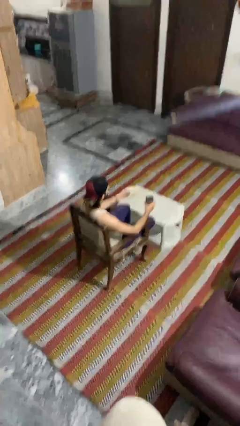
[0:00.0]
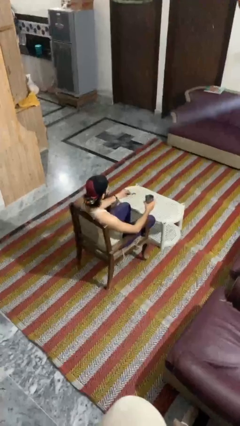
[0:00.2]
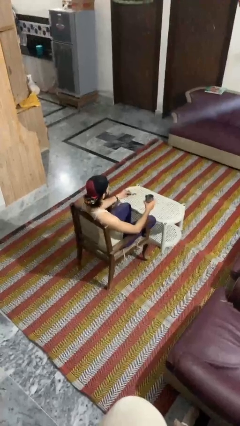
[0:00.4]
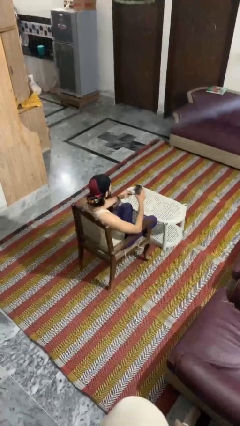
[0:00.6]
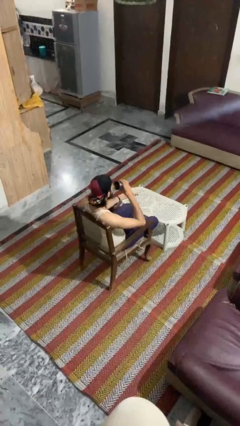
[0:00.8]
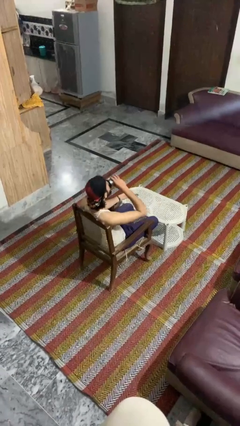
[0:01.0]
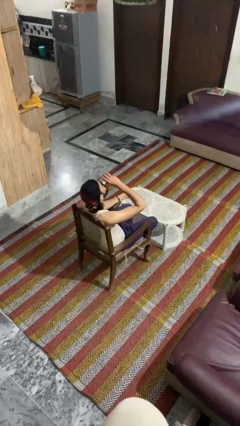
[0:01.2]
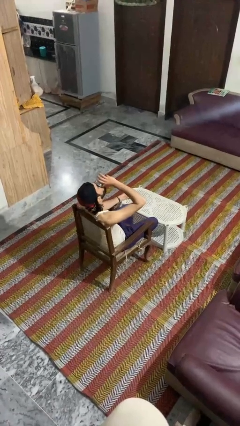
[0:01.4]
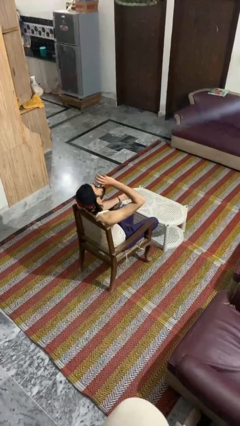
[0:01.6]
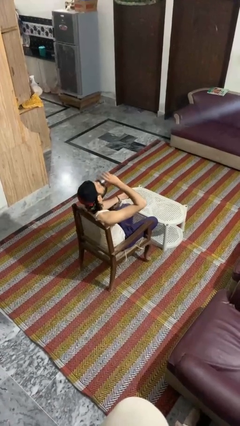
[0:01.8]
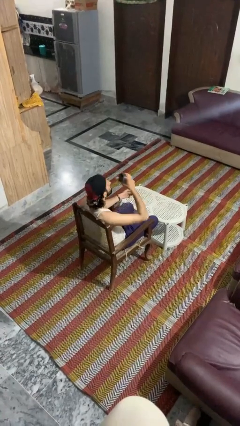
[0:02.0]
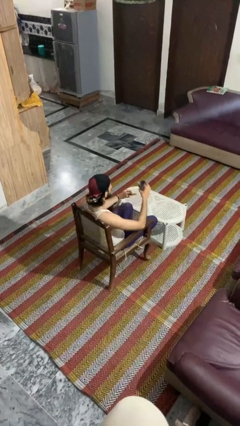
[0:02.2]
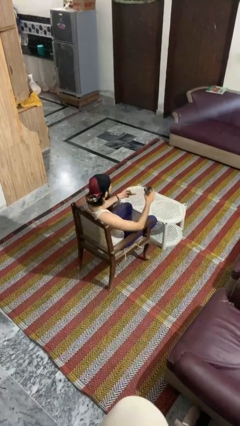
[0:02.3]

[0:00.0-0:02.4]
person drinks from mug

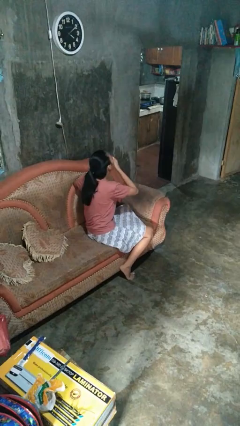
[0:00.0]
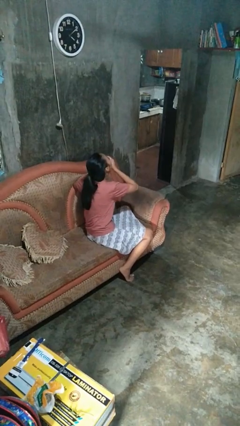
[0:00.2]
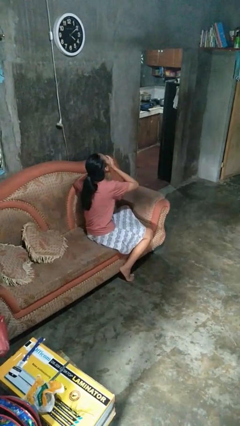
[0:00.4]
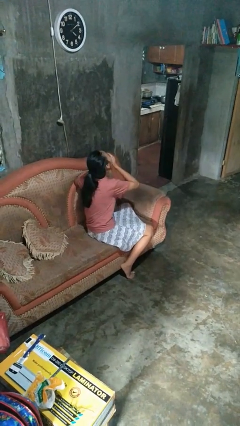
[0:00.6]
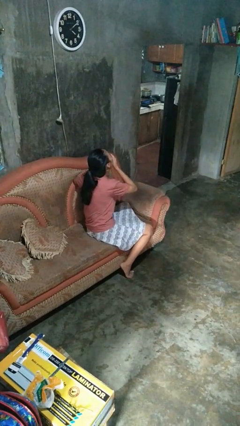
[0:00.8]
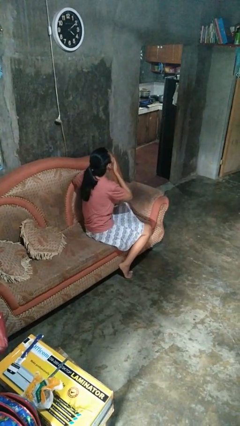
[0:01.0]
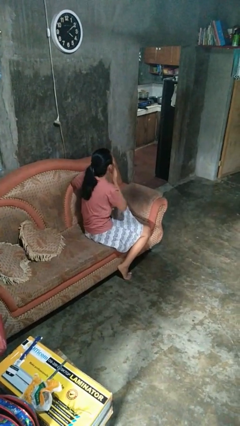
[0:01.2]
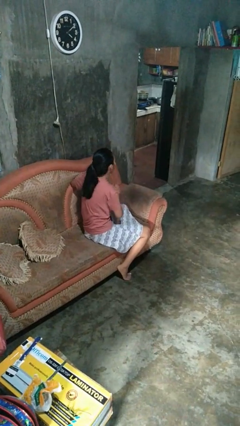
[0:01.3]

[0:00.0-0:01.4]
person yawns

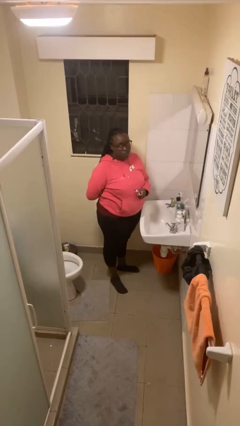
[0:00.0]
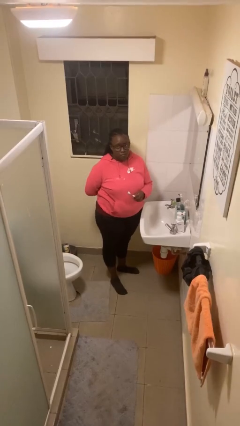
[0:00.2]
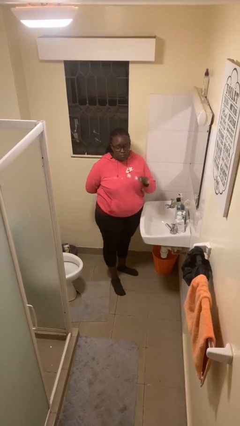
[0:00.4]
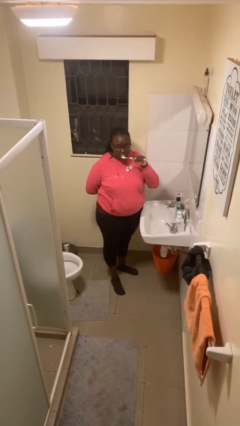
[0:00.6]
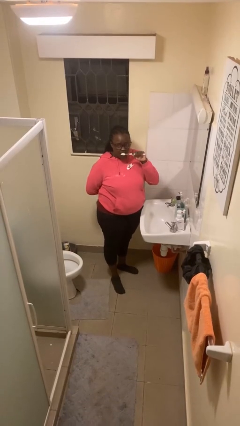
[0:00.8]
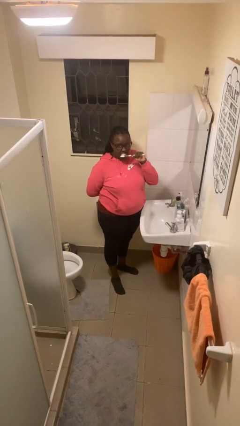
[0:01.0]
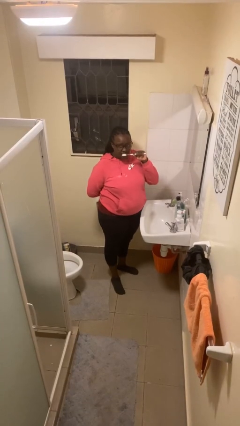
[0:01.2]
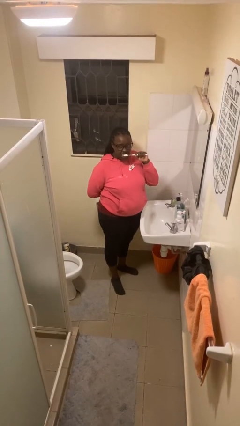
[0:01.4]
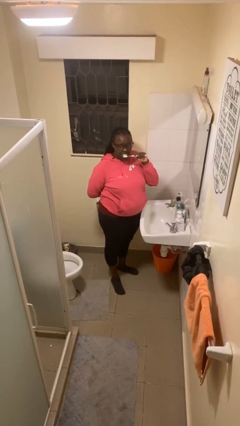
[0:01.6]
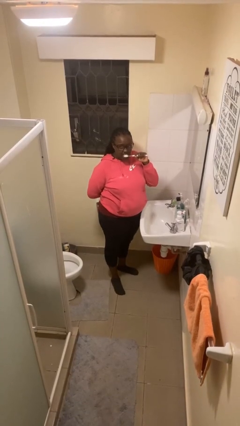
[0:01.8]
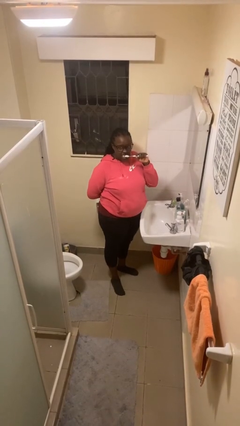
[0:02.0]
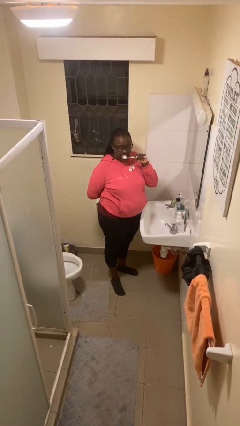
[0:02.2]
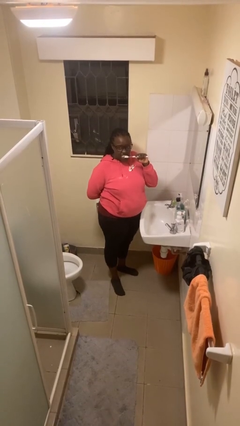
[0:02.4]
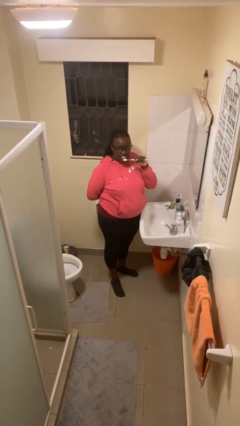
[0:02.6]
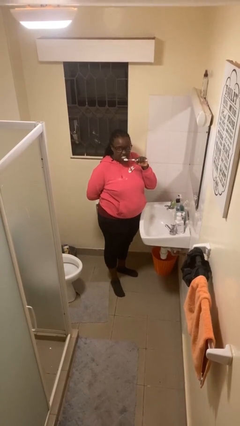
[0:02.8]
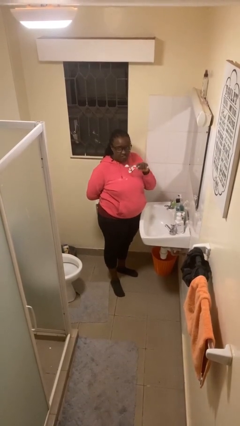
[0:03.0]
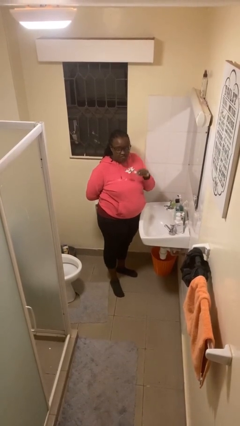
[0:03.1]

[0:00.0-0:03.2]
person brushes teeth

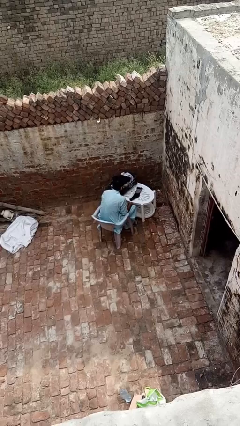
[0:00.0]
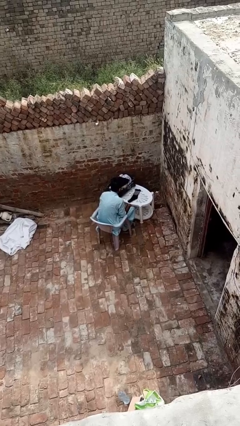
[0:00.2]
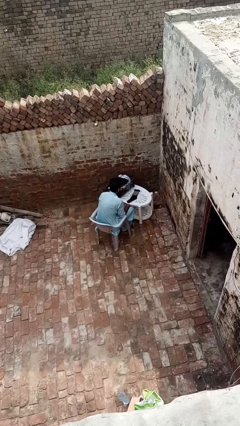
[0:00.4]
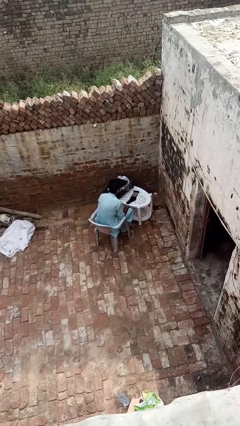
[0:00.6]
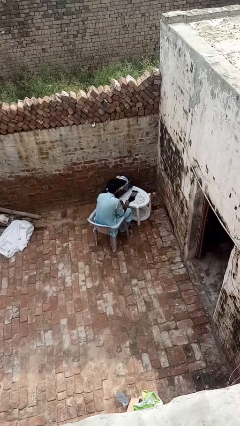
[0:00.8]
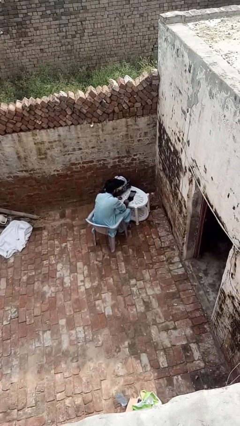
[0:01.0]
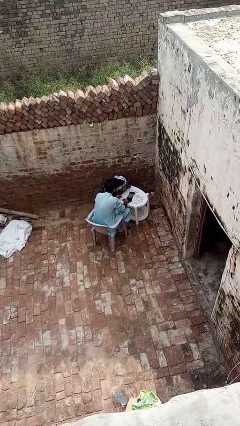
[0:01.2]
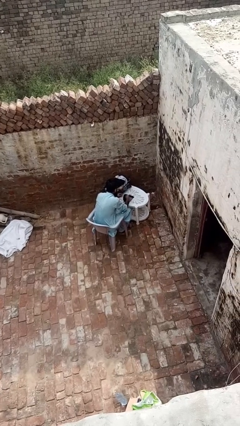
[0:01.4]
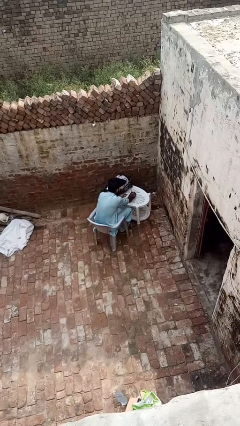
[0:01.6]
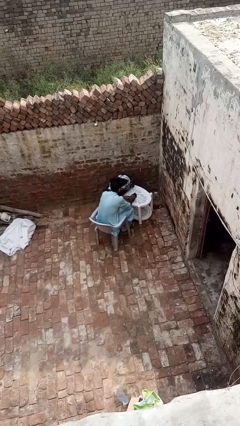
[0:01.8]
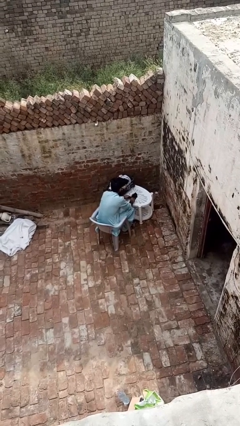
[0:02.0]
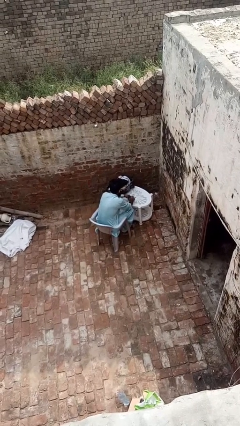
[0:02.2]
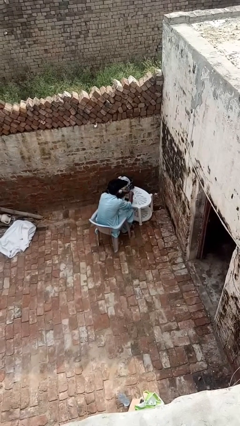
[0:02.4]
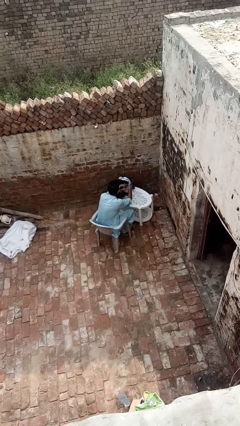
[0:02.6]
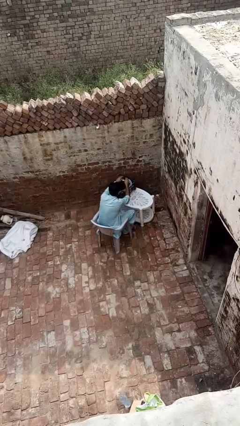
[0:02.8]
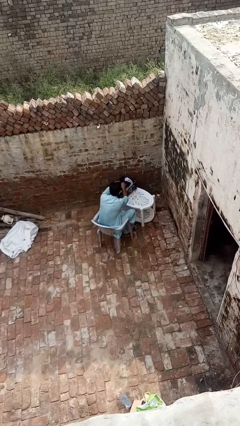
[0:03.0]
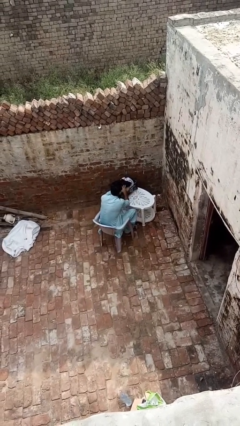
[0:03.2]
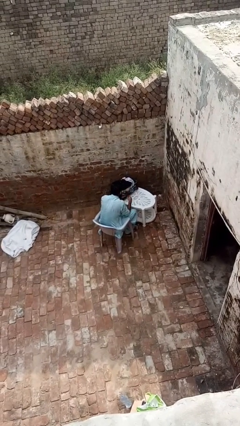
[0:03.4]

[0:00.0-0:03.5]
person folds socks

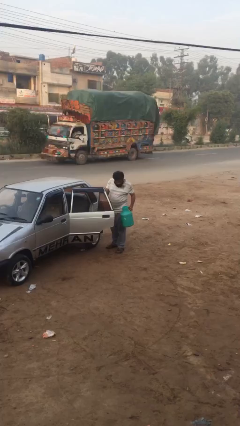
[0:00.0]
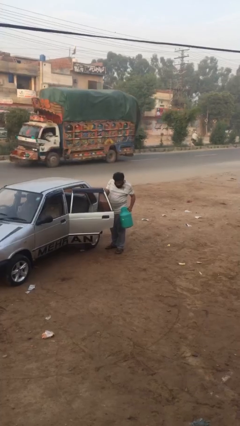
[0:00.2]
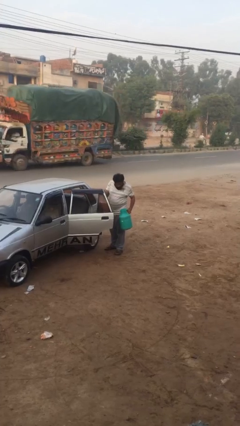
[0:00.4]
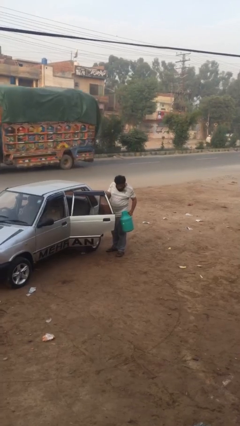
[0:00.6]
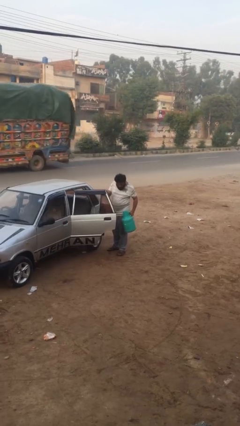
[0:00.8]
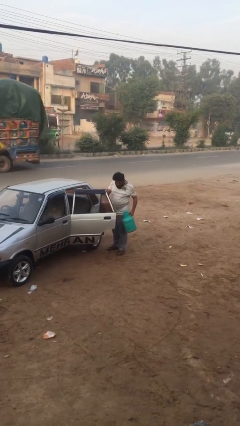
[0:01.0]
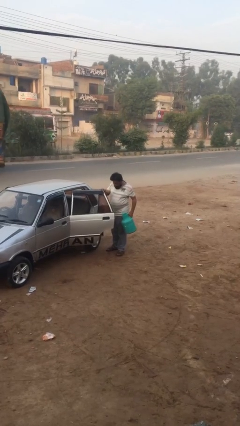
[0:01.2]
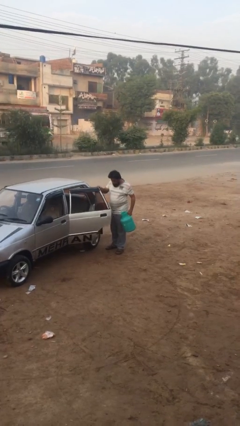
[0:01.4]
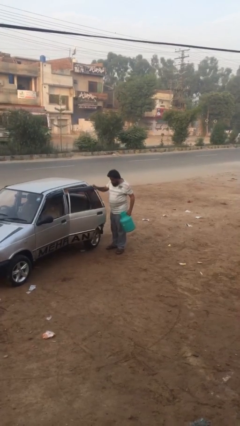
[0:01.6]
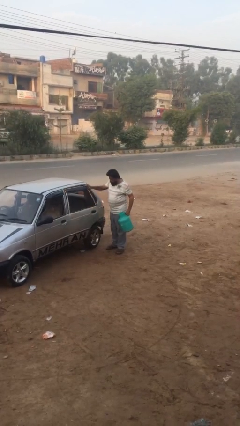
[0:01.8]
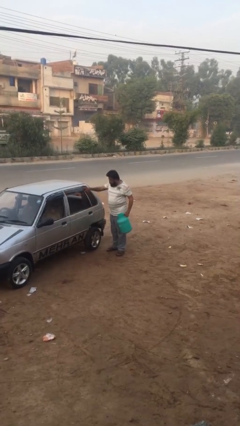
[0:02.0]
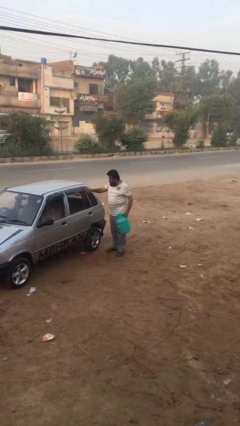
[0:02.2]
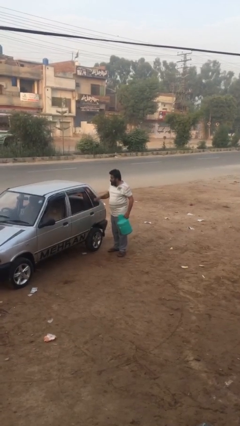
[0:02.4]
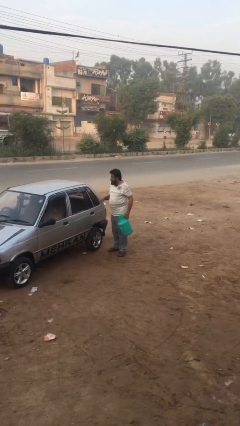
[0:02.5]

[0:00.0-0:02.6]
person closes car door

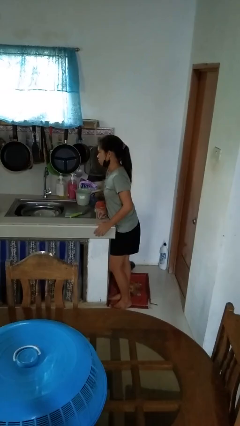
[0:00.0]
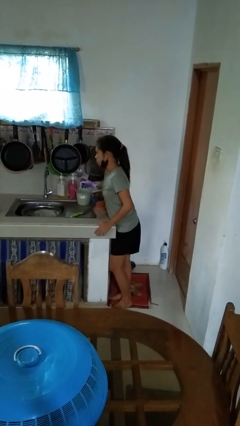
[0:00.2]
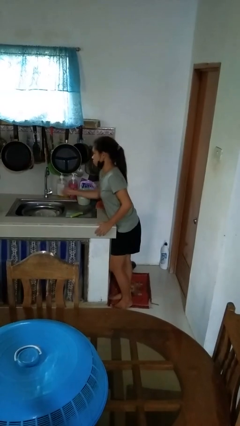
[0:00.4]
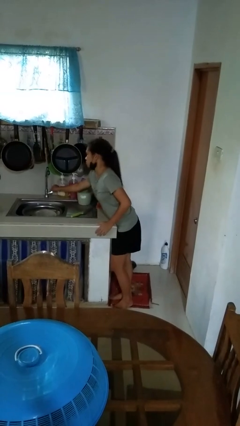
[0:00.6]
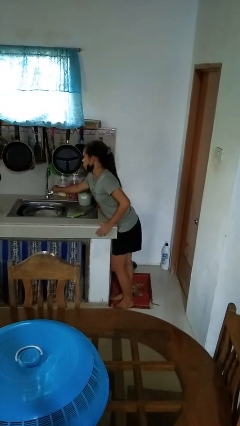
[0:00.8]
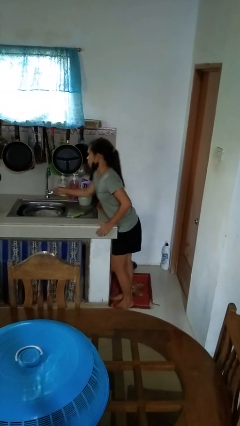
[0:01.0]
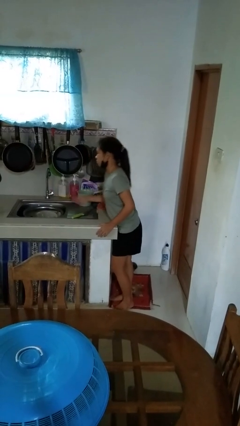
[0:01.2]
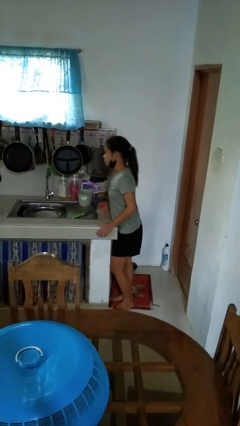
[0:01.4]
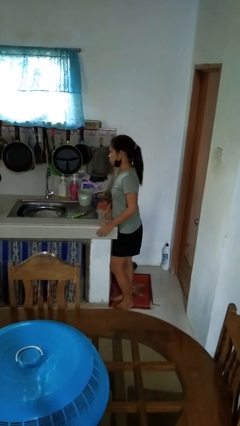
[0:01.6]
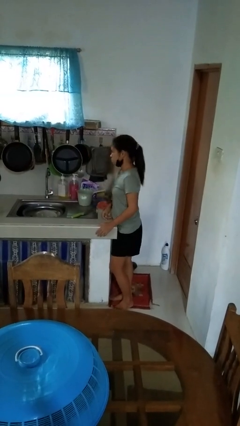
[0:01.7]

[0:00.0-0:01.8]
person turns off faucet

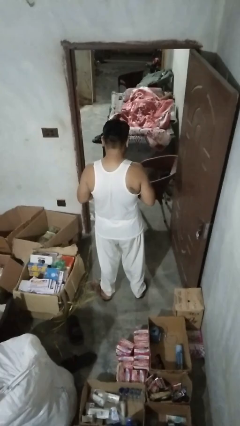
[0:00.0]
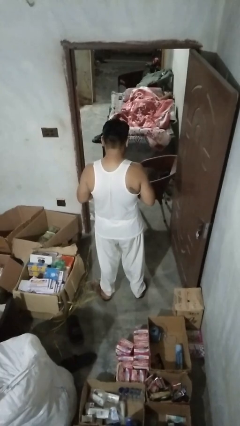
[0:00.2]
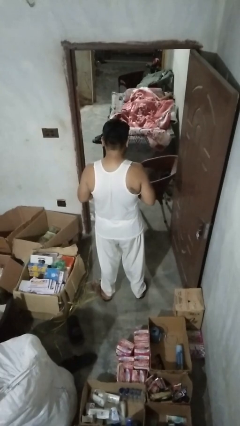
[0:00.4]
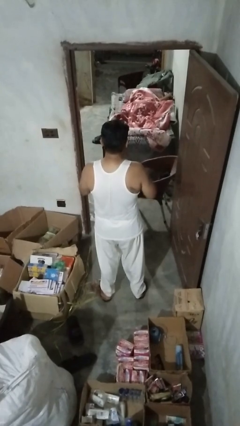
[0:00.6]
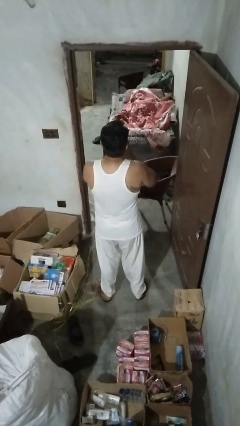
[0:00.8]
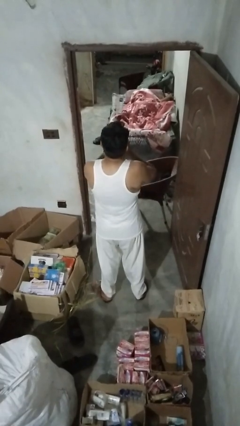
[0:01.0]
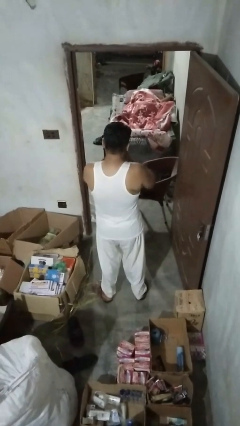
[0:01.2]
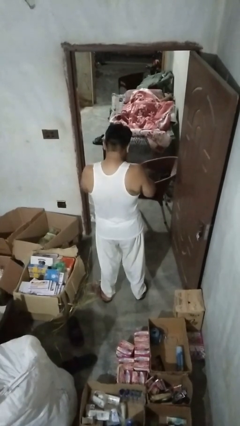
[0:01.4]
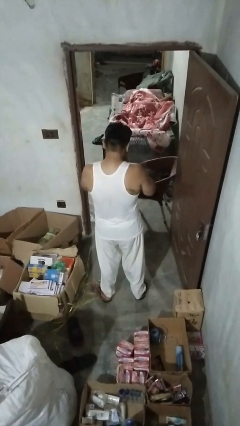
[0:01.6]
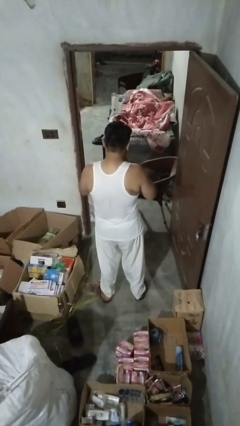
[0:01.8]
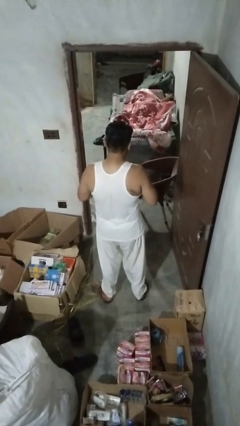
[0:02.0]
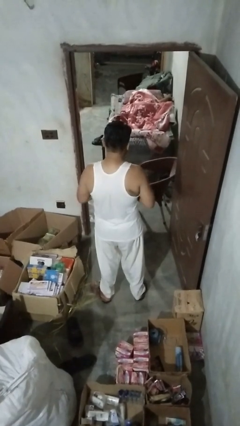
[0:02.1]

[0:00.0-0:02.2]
person sneezes into hand
